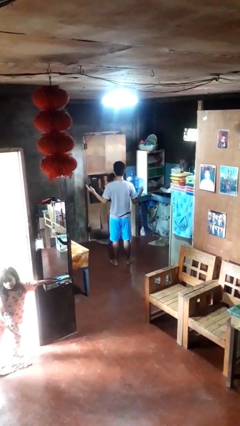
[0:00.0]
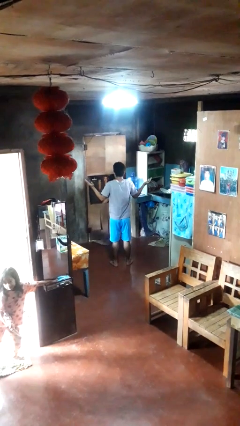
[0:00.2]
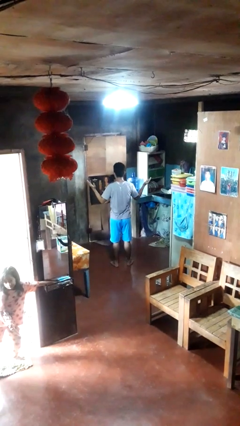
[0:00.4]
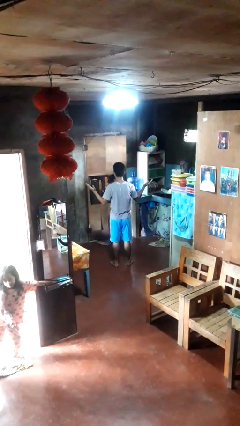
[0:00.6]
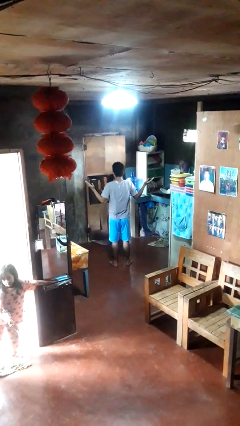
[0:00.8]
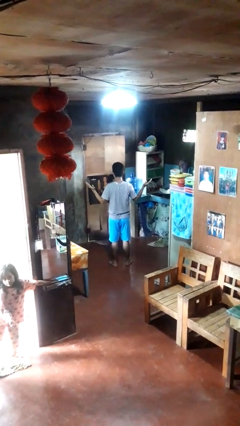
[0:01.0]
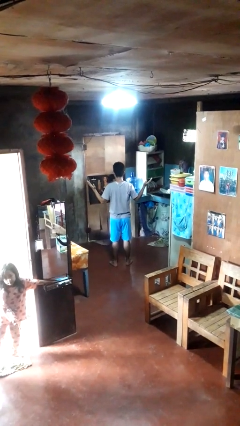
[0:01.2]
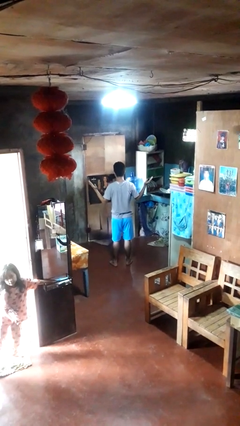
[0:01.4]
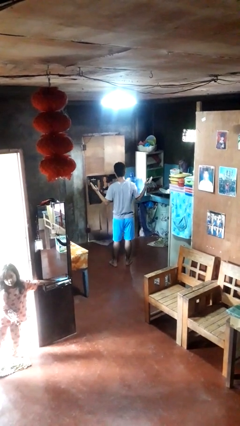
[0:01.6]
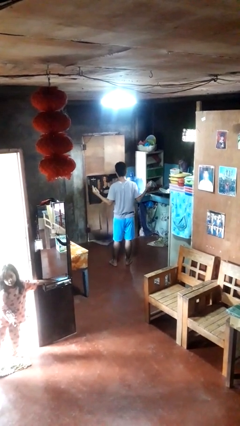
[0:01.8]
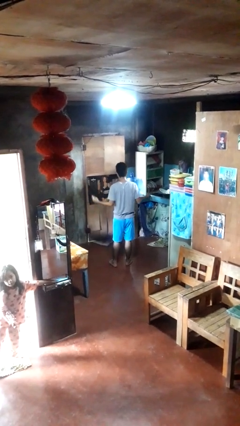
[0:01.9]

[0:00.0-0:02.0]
person shrugs

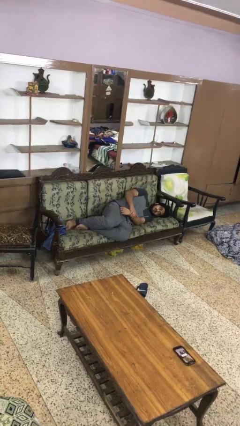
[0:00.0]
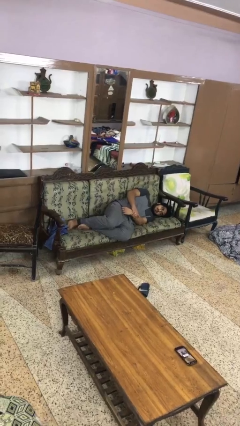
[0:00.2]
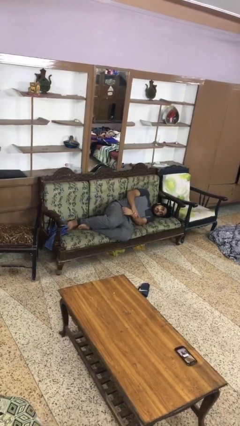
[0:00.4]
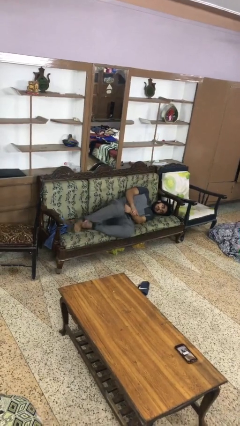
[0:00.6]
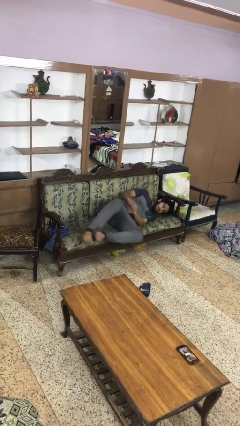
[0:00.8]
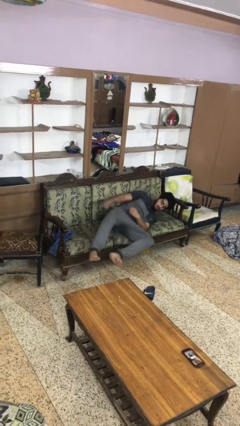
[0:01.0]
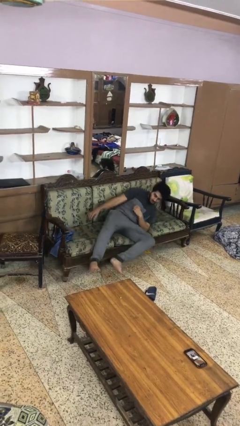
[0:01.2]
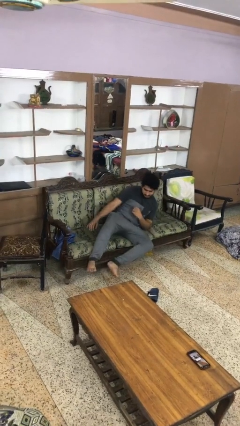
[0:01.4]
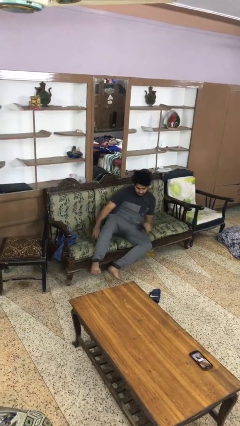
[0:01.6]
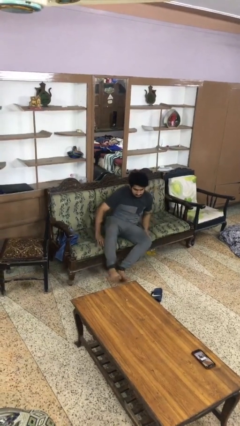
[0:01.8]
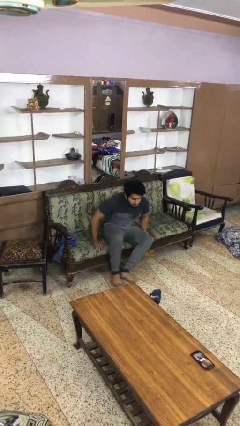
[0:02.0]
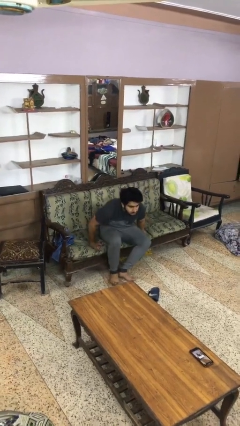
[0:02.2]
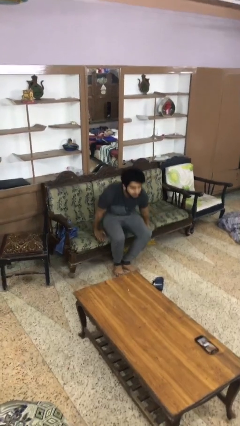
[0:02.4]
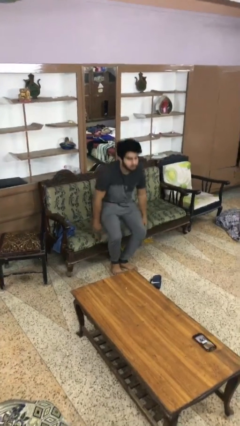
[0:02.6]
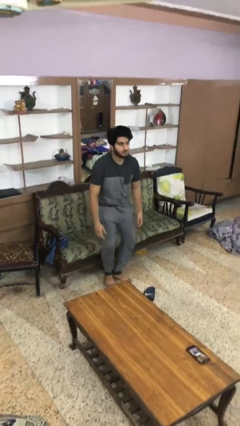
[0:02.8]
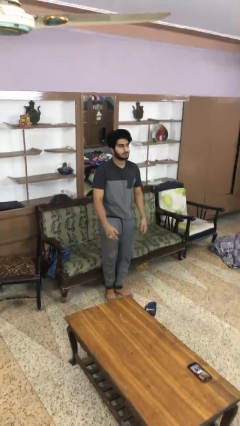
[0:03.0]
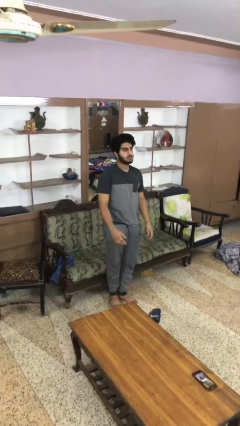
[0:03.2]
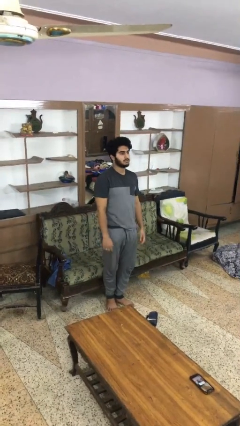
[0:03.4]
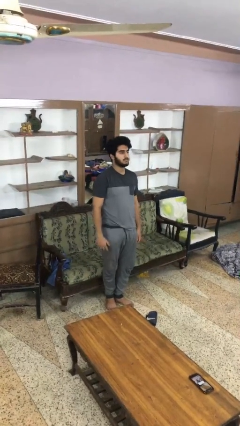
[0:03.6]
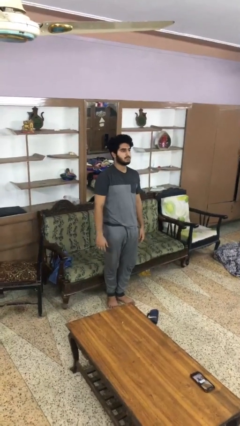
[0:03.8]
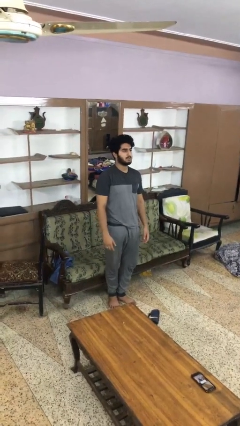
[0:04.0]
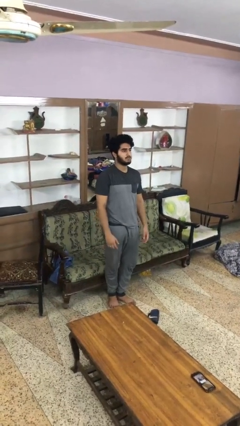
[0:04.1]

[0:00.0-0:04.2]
person stands up

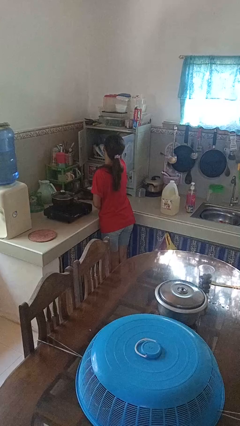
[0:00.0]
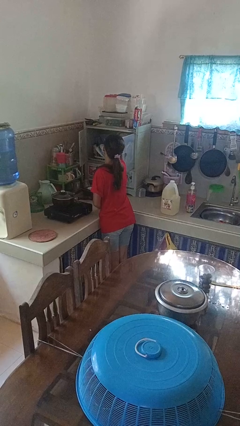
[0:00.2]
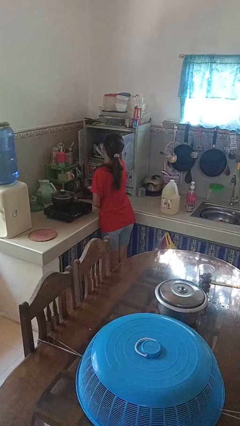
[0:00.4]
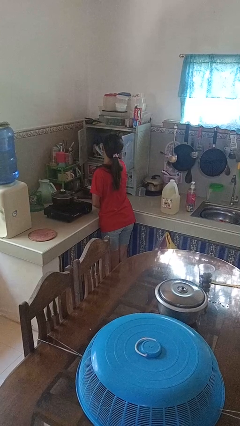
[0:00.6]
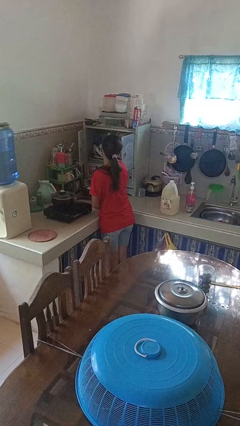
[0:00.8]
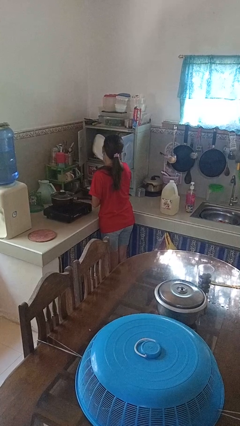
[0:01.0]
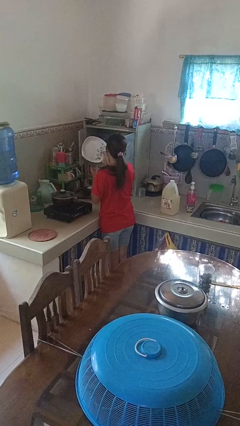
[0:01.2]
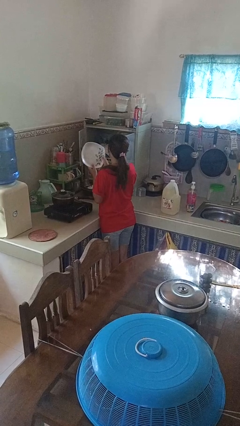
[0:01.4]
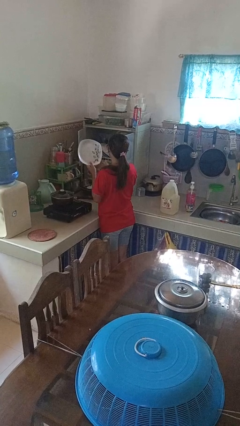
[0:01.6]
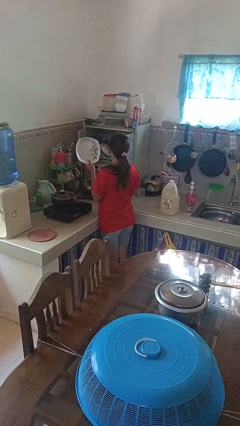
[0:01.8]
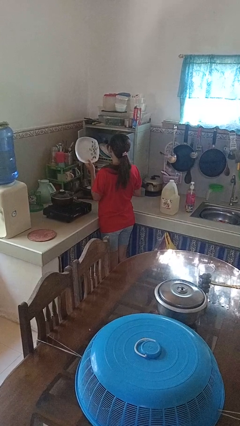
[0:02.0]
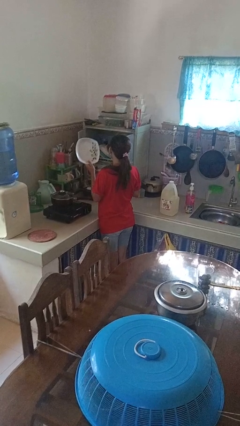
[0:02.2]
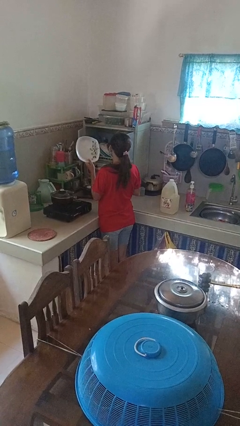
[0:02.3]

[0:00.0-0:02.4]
person takes object from cabinet

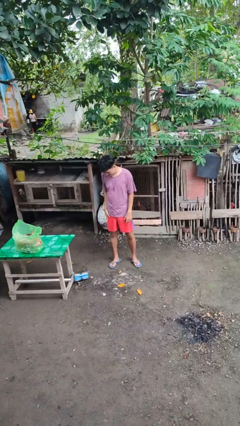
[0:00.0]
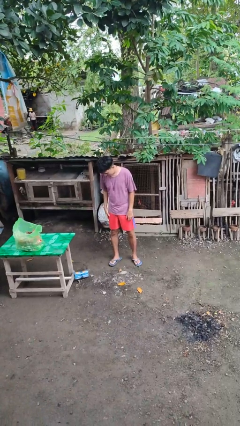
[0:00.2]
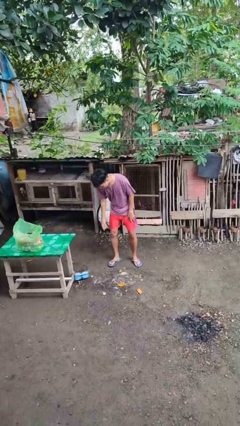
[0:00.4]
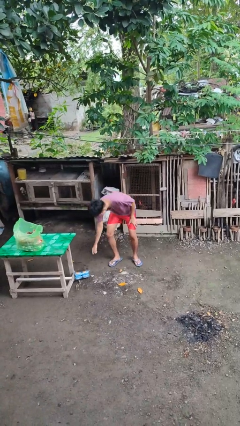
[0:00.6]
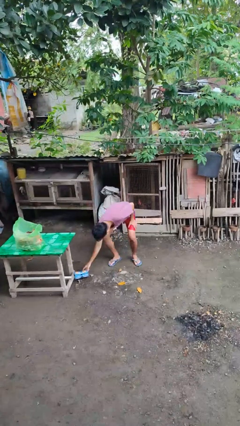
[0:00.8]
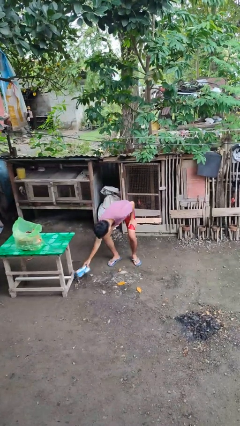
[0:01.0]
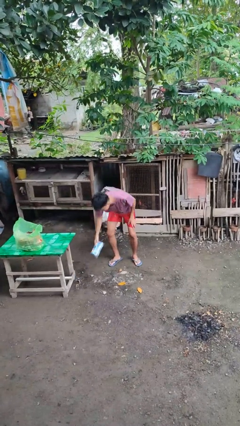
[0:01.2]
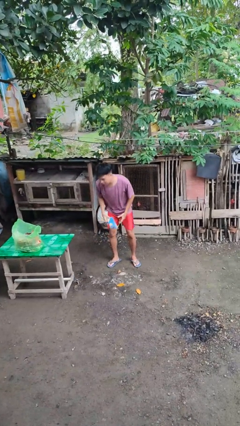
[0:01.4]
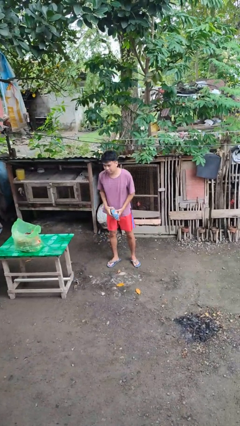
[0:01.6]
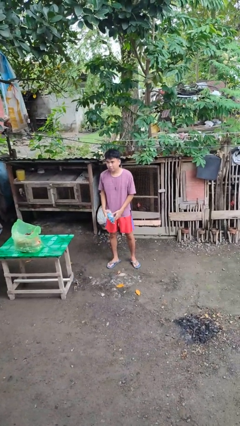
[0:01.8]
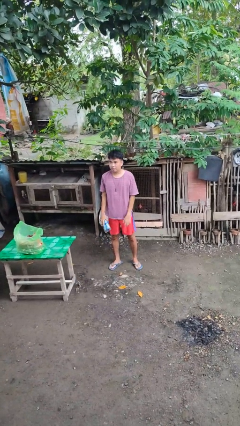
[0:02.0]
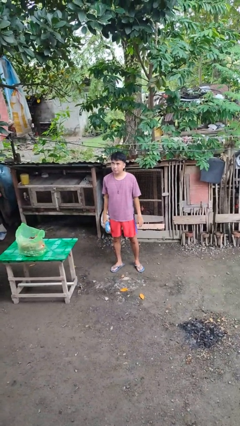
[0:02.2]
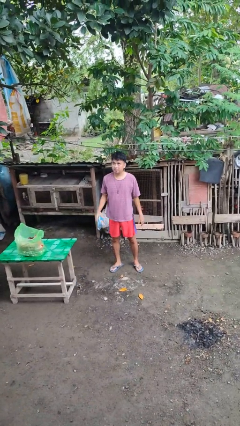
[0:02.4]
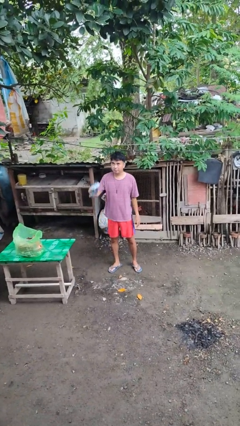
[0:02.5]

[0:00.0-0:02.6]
person picks up object from floor

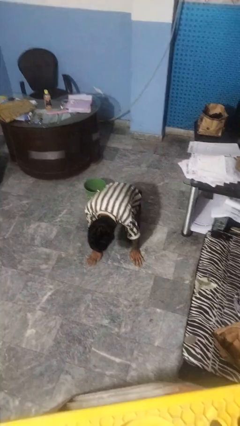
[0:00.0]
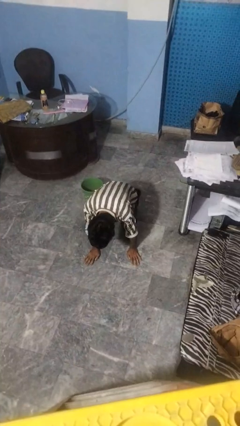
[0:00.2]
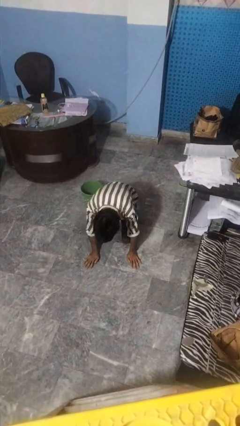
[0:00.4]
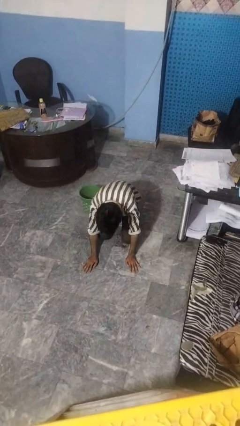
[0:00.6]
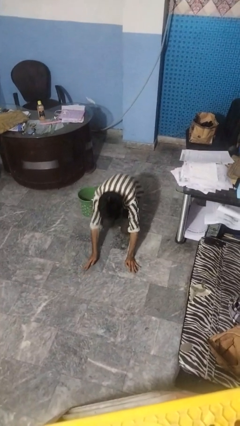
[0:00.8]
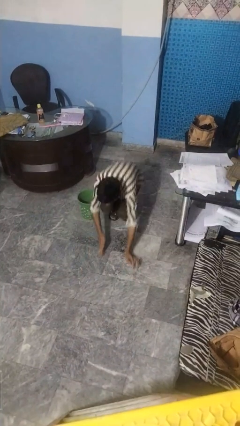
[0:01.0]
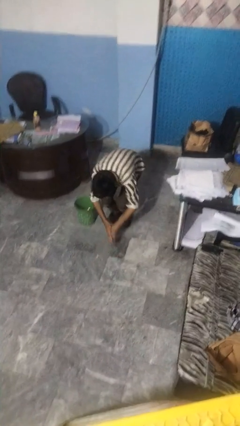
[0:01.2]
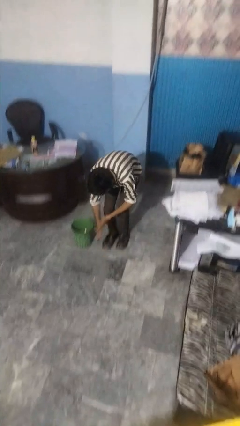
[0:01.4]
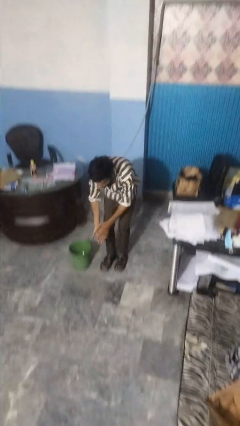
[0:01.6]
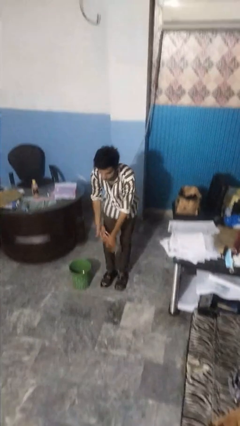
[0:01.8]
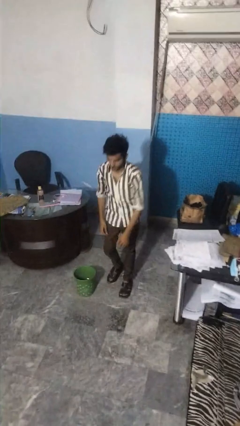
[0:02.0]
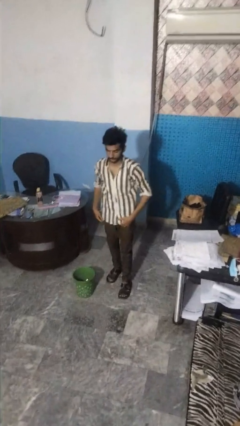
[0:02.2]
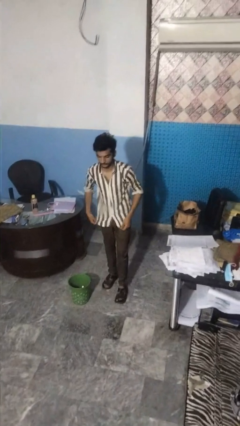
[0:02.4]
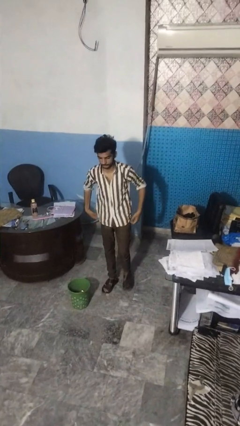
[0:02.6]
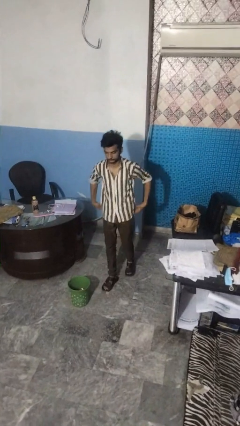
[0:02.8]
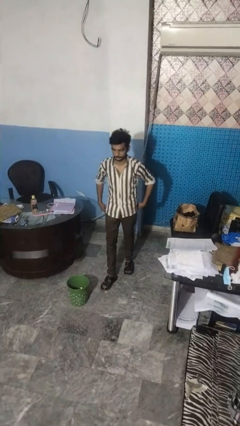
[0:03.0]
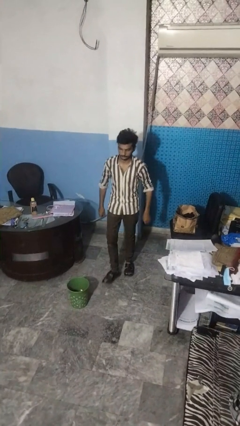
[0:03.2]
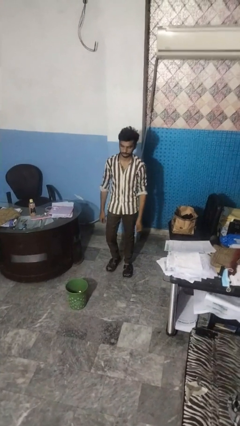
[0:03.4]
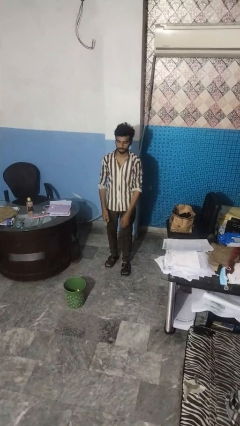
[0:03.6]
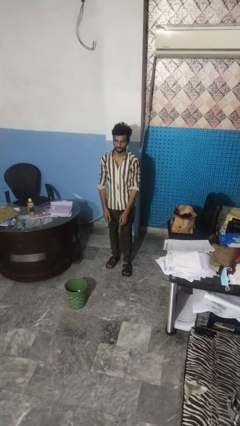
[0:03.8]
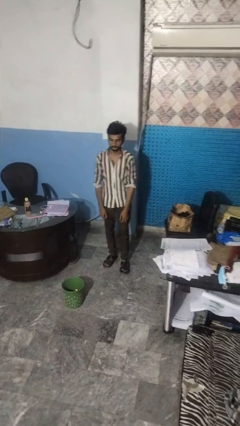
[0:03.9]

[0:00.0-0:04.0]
person stands up from floor

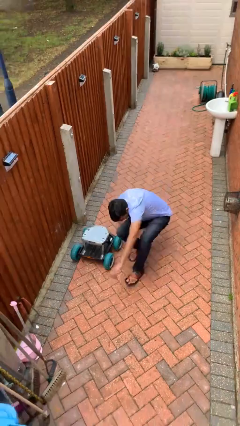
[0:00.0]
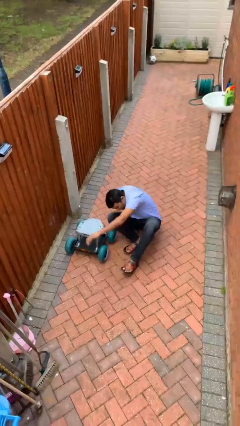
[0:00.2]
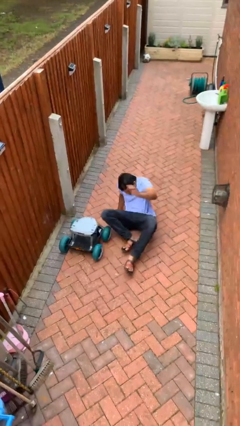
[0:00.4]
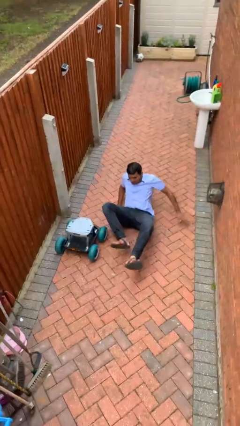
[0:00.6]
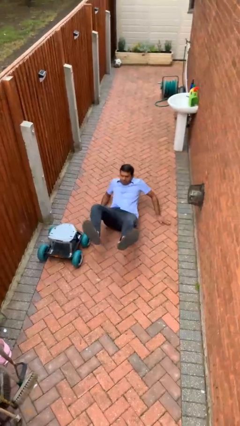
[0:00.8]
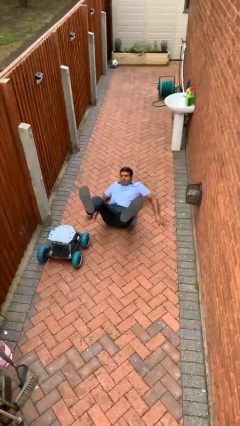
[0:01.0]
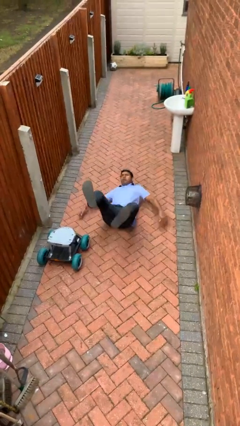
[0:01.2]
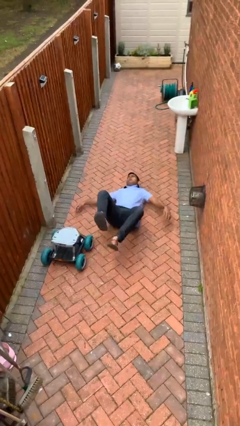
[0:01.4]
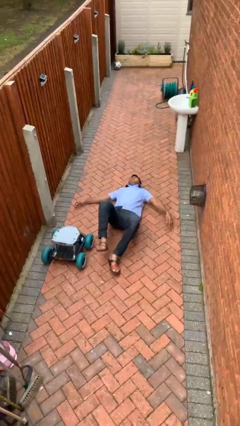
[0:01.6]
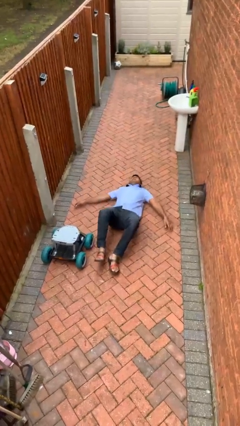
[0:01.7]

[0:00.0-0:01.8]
person trips on object on floor
